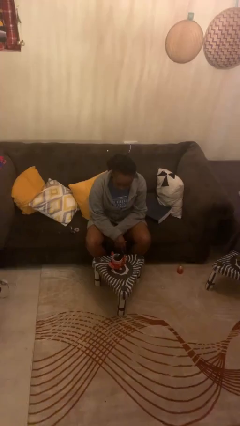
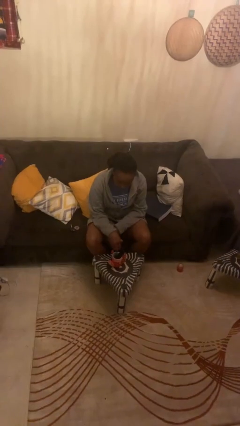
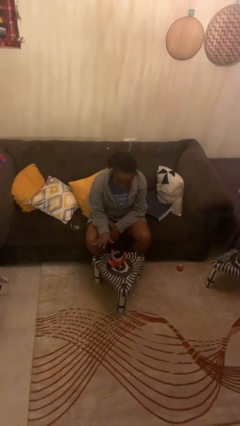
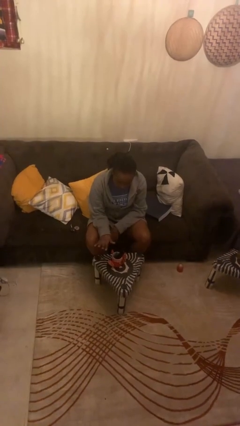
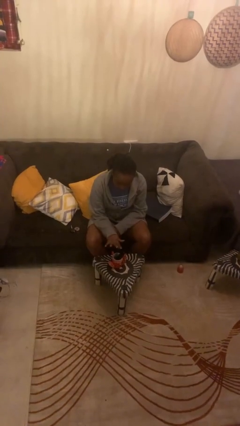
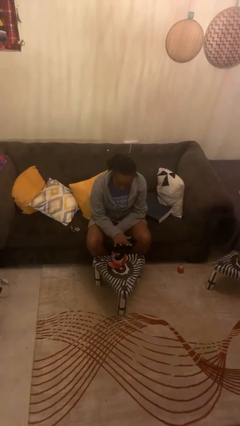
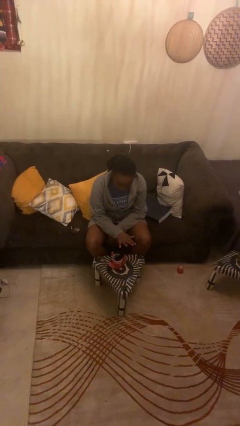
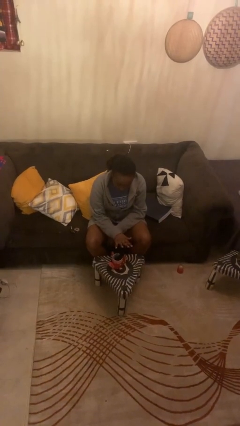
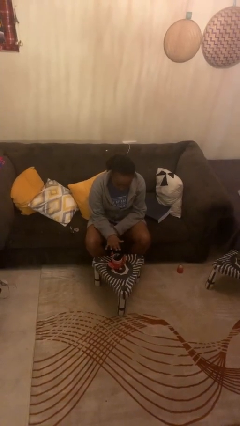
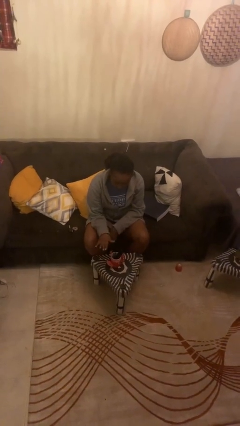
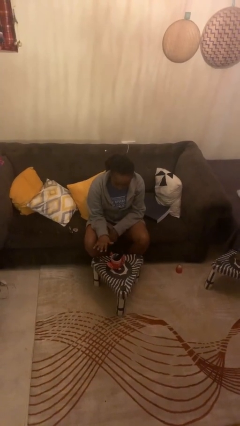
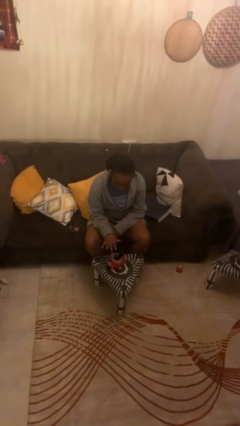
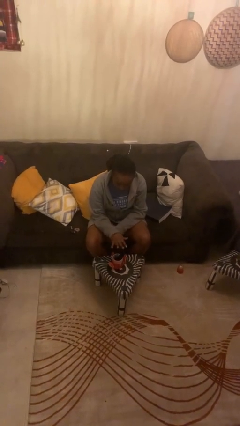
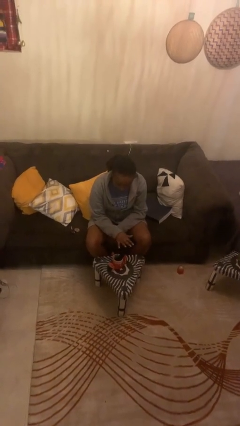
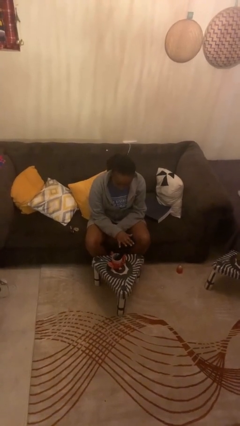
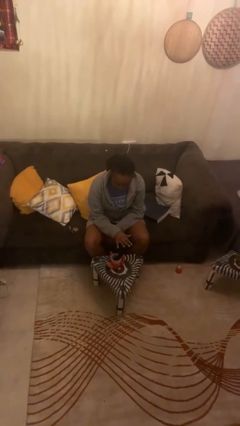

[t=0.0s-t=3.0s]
person waves hand over object

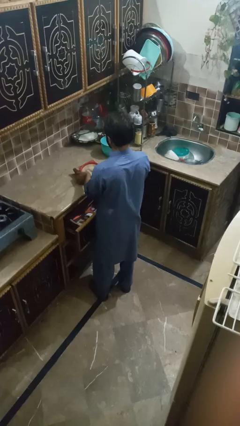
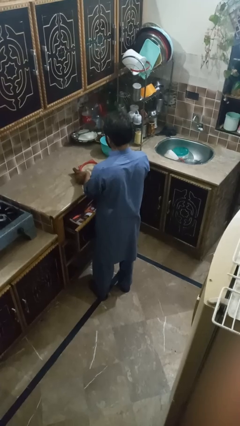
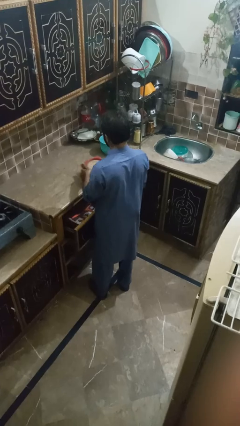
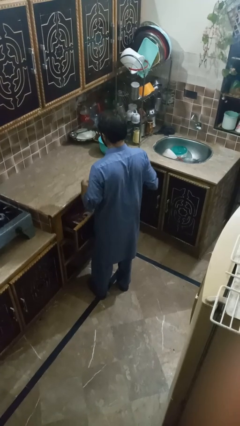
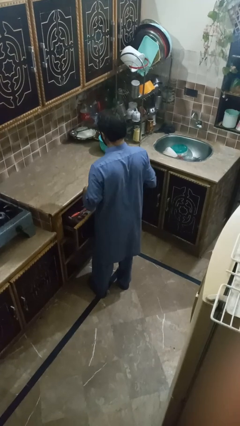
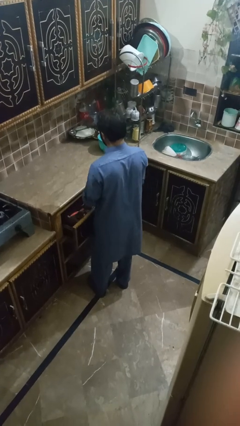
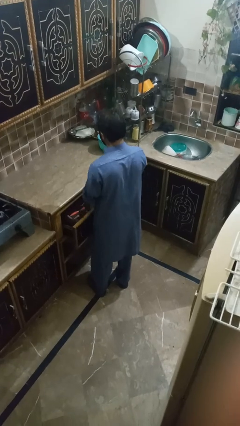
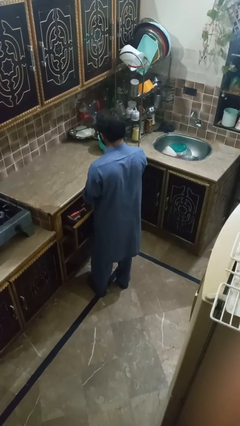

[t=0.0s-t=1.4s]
person puts object into kitchen drawer

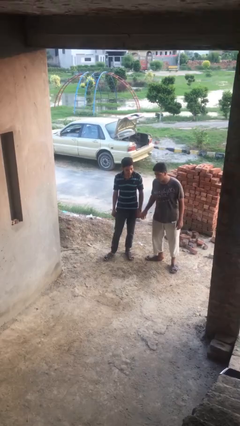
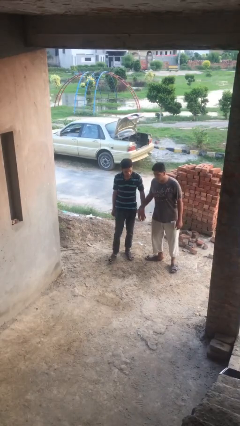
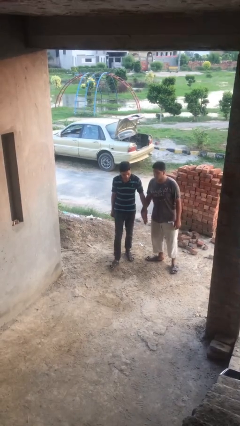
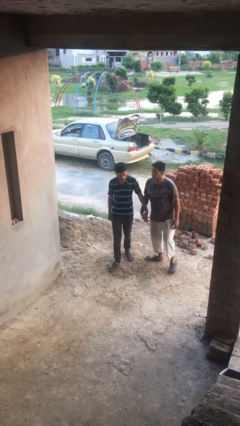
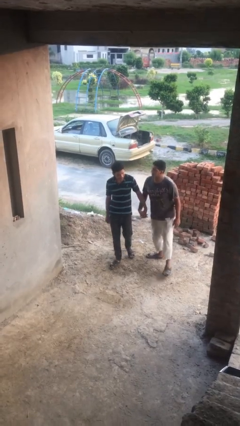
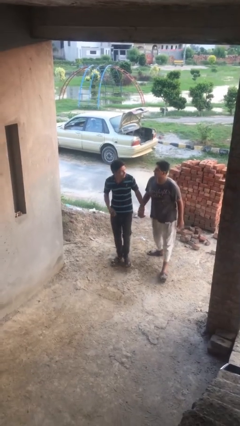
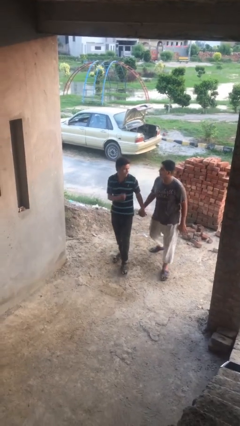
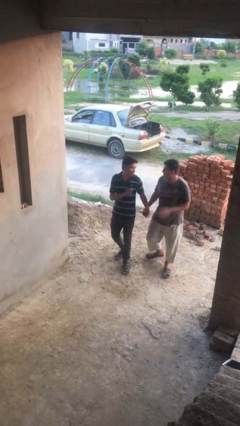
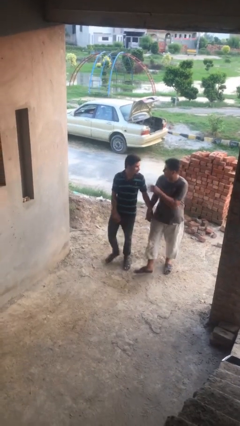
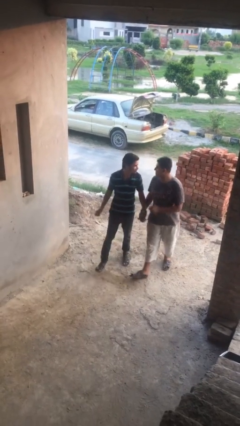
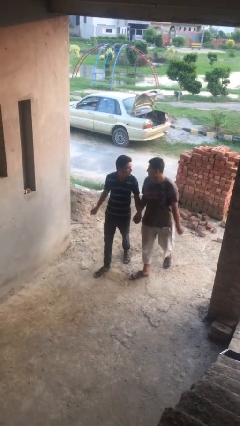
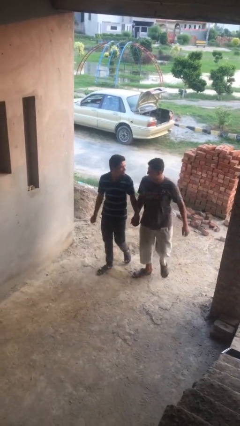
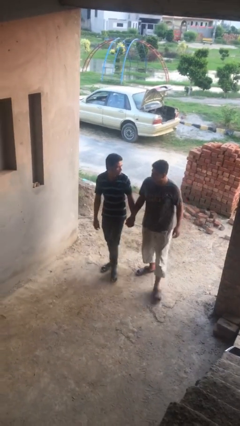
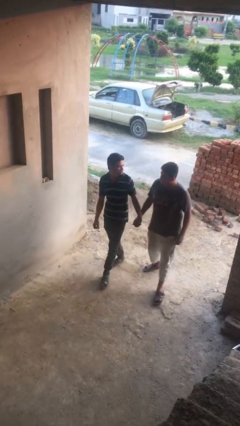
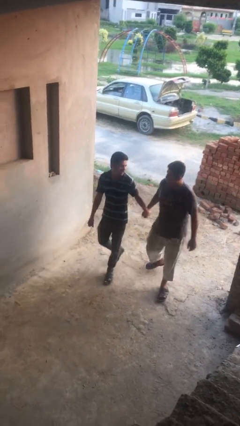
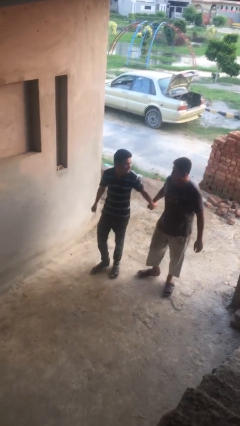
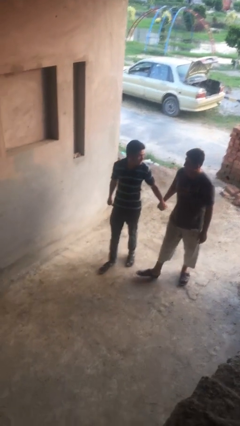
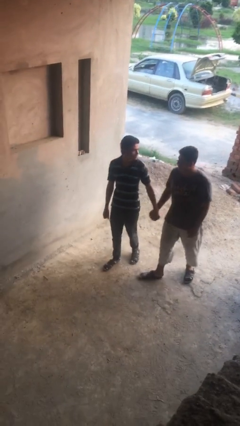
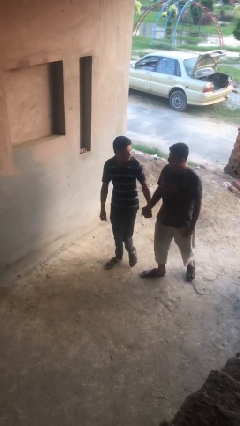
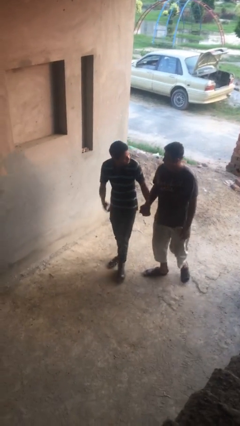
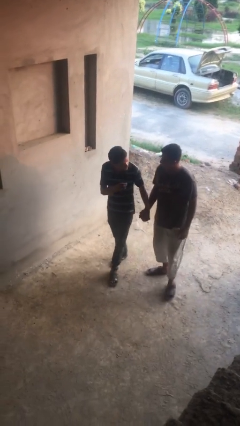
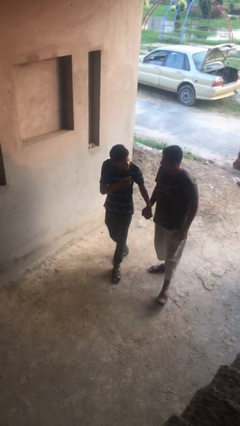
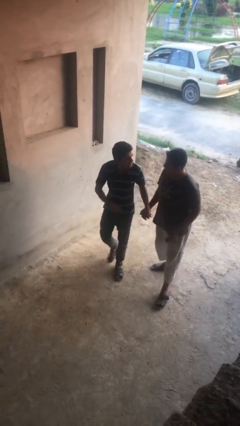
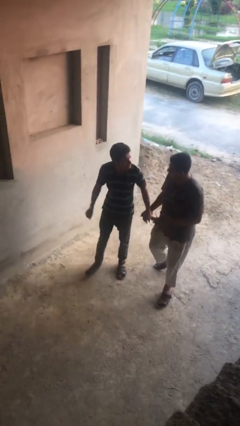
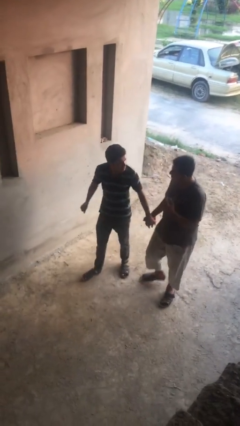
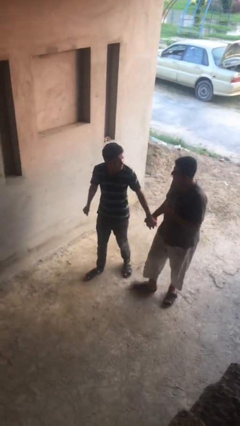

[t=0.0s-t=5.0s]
person holds hand

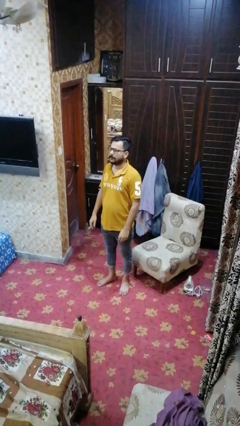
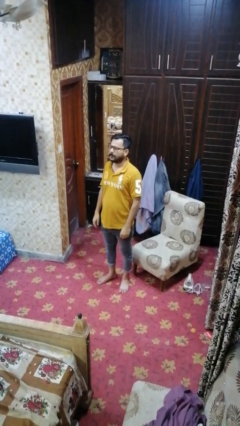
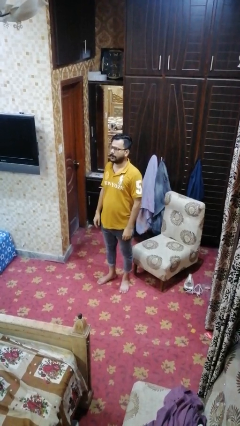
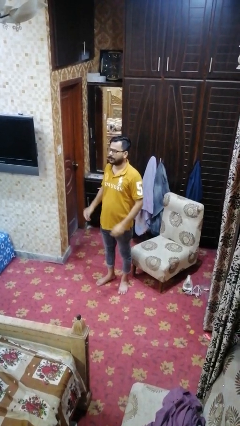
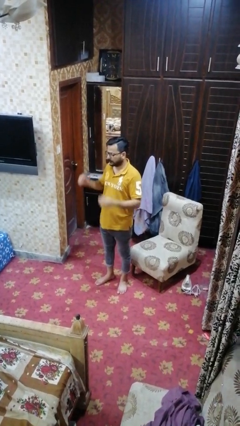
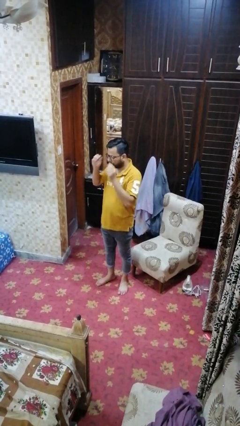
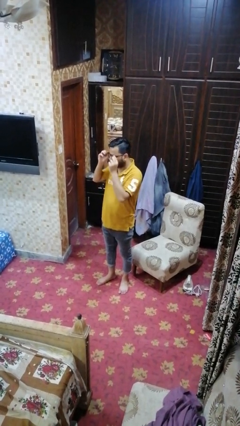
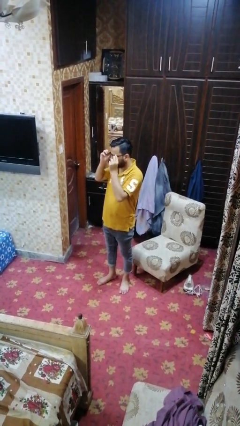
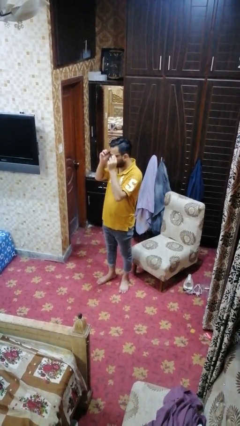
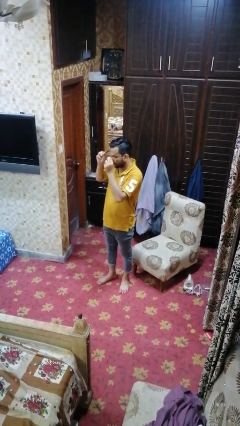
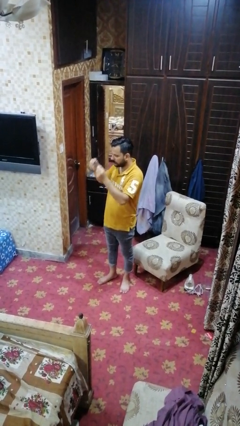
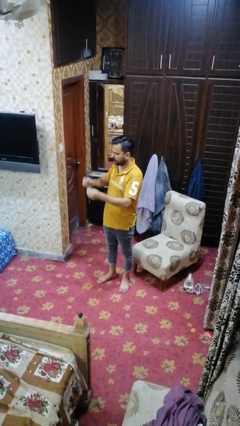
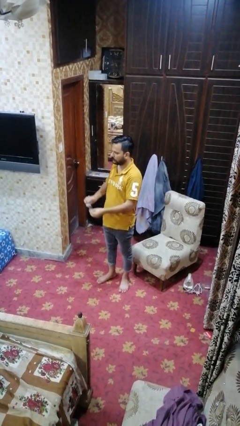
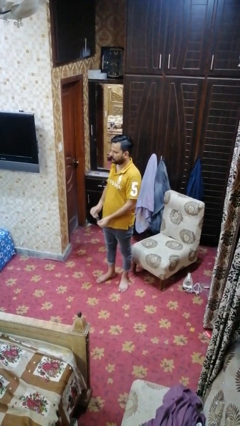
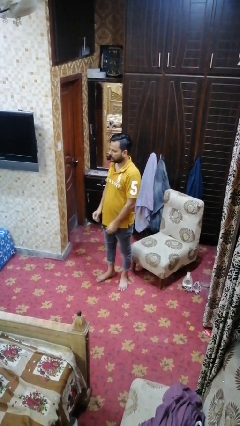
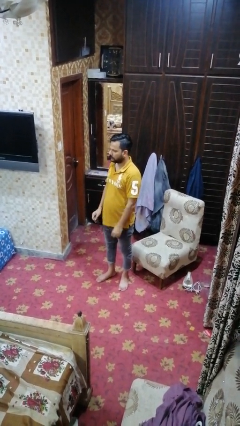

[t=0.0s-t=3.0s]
person takes off glasses

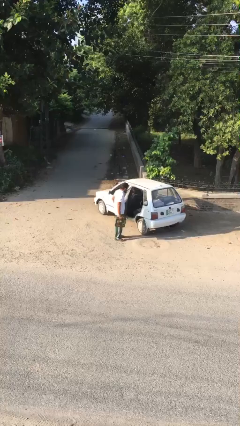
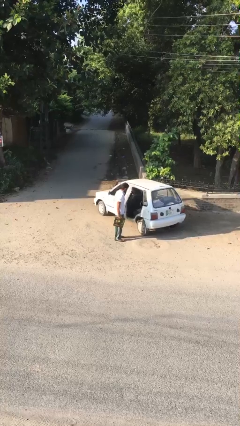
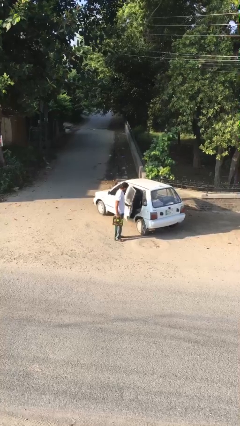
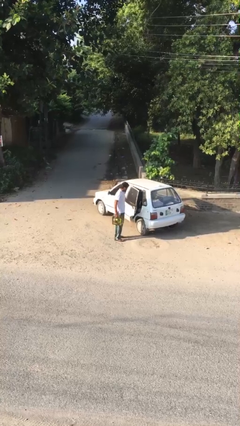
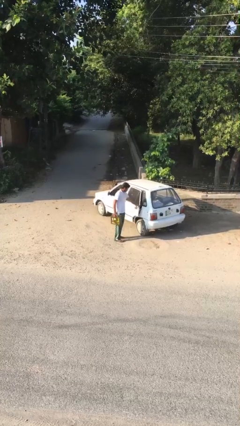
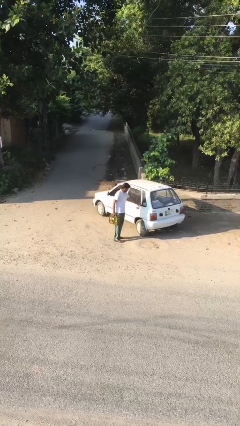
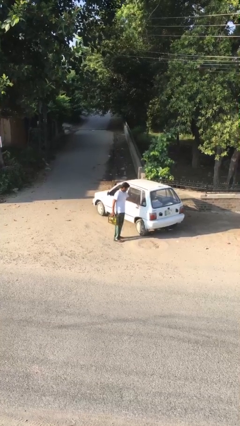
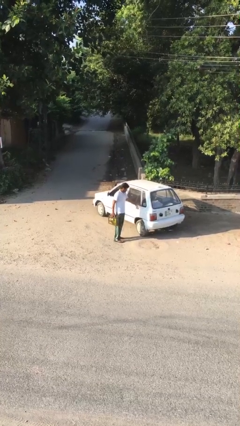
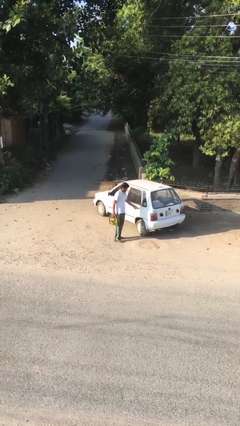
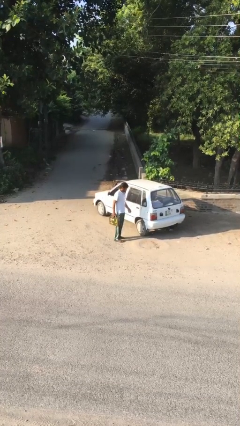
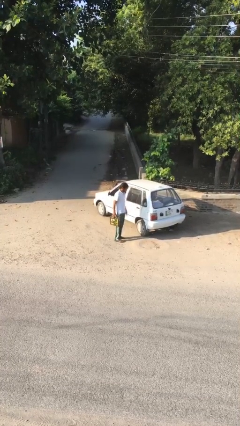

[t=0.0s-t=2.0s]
person closes car door

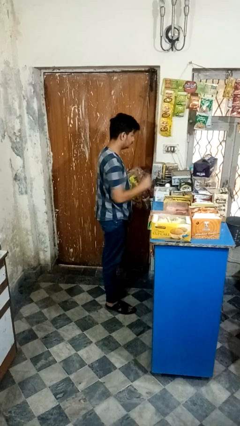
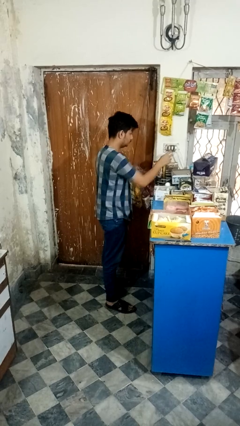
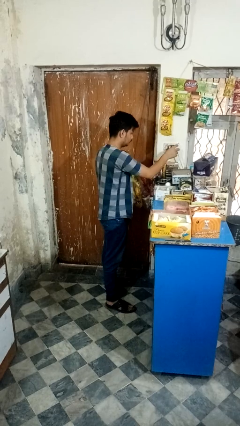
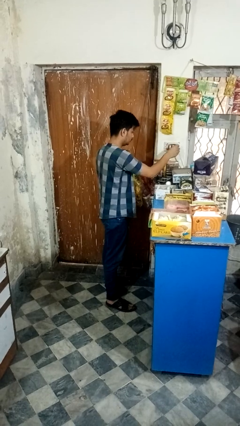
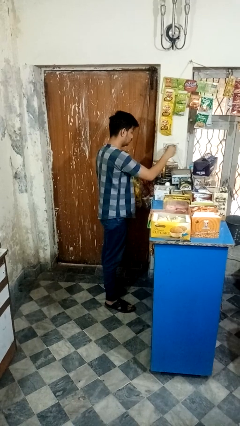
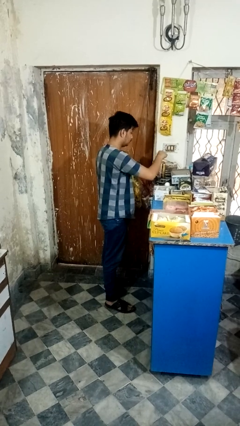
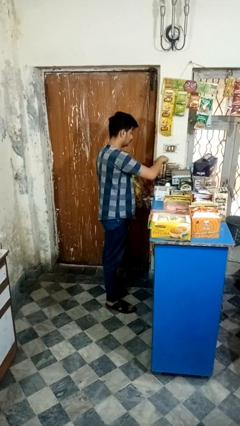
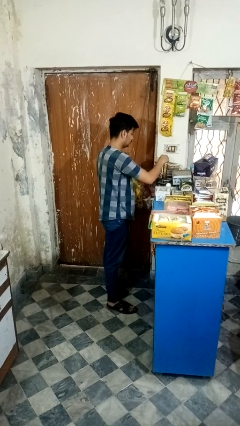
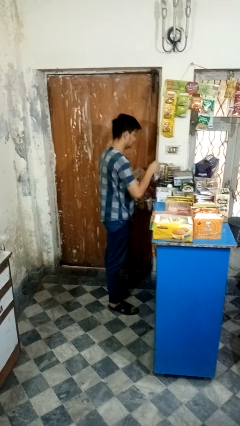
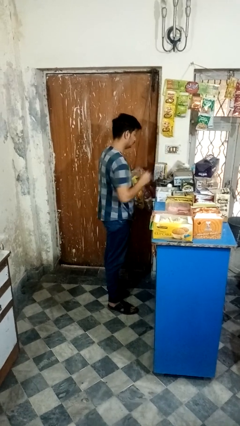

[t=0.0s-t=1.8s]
person unplugs from electrical socket

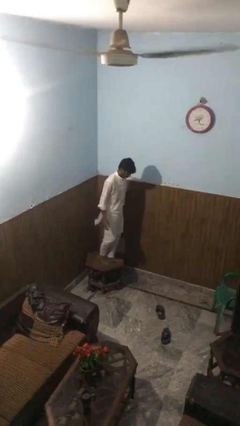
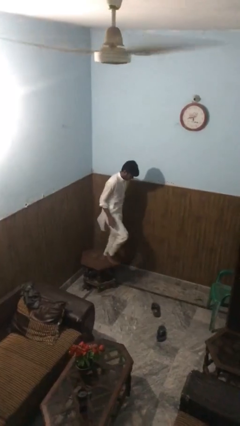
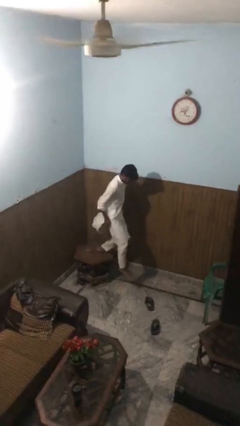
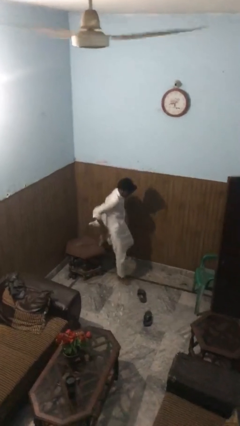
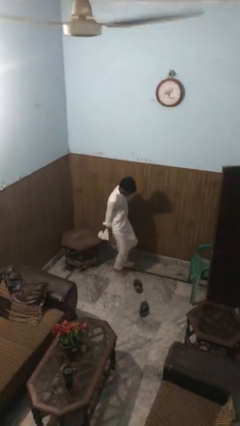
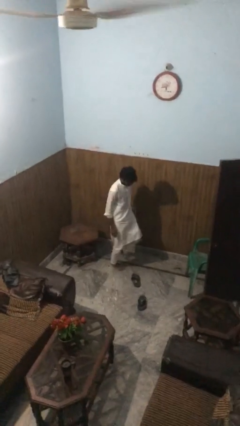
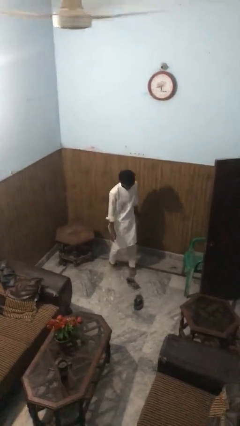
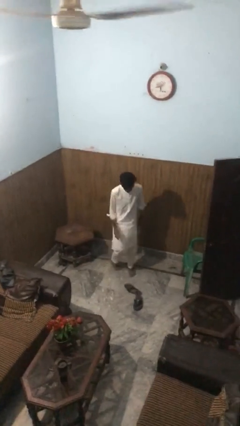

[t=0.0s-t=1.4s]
person climbs off table
